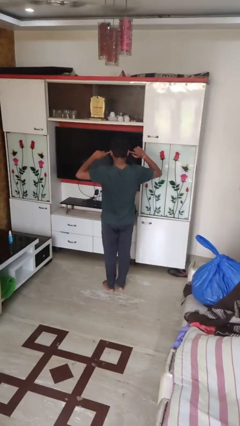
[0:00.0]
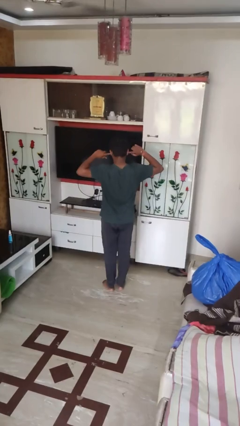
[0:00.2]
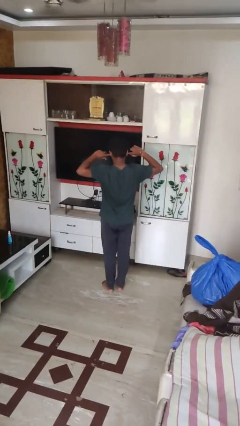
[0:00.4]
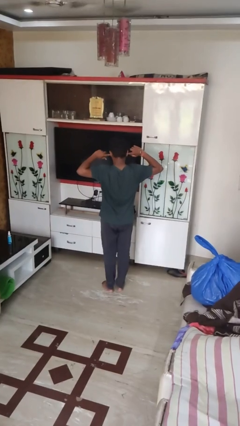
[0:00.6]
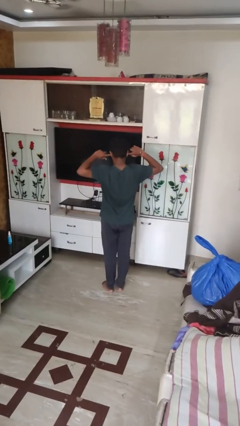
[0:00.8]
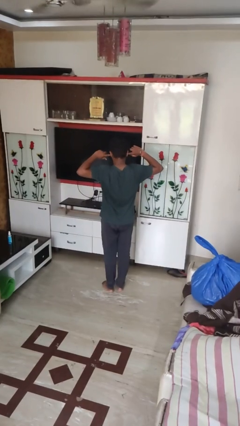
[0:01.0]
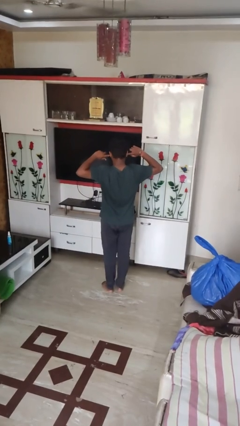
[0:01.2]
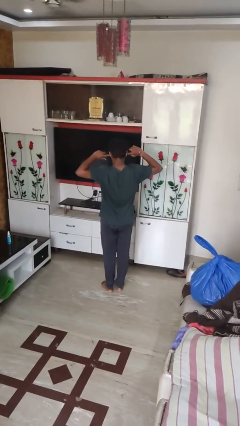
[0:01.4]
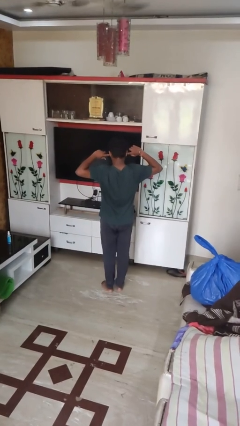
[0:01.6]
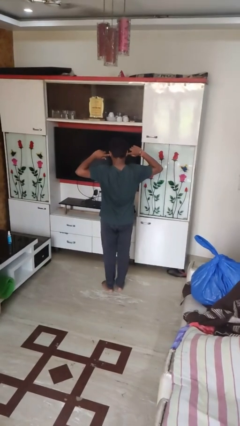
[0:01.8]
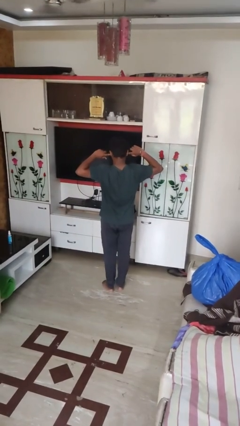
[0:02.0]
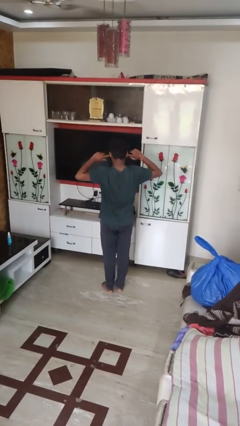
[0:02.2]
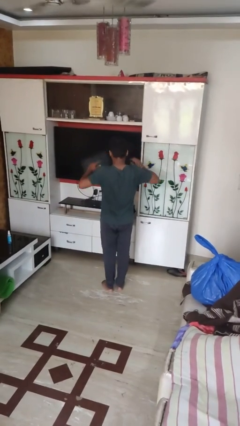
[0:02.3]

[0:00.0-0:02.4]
person puts fingers in ear

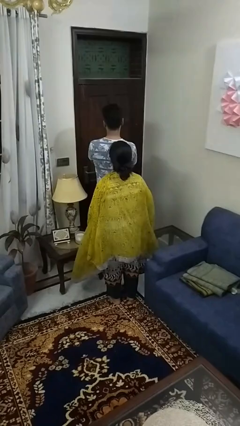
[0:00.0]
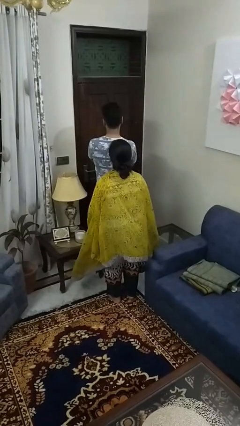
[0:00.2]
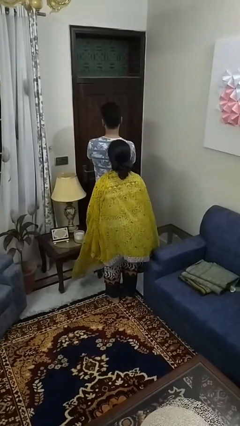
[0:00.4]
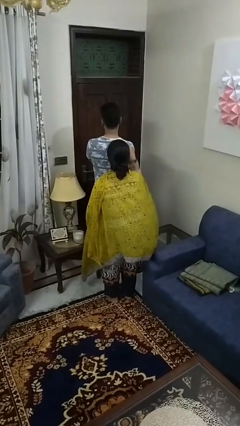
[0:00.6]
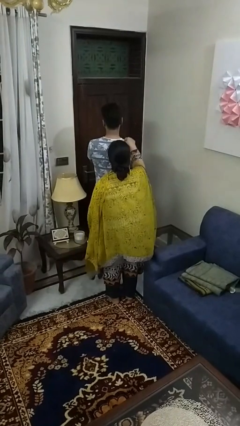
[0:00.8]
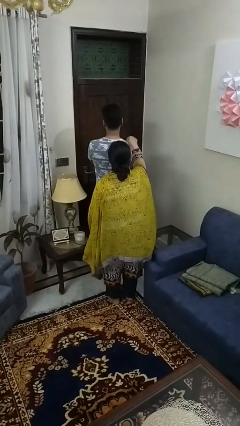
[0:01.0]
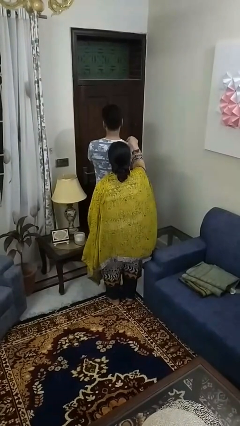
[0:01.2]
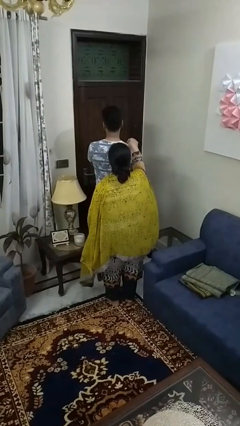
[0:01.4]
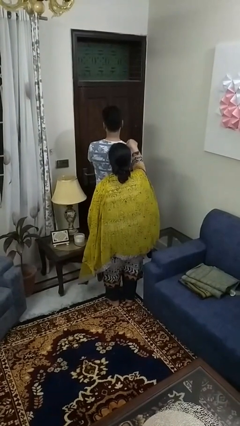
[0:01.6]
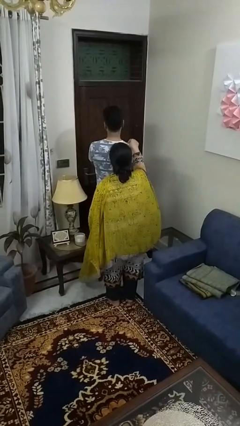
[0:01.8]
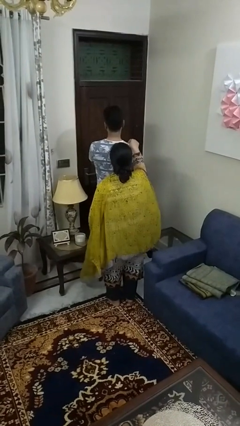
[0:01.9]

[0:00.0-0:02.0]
person touches back of person

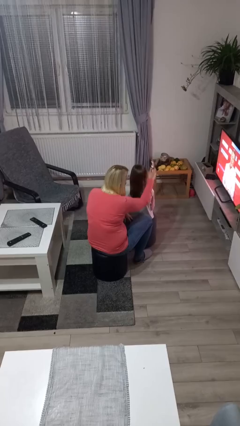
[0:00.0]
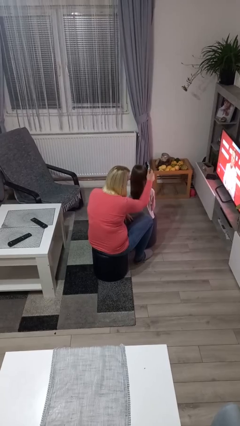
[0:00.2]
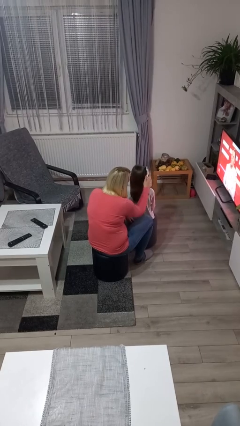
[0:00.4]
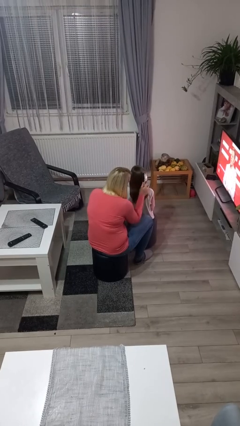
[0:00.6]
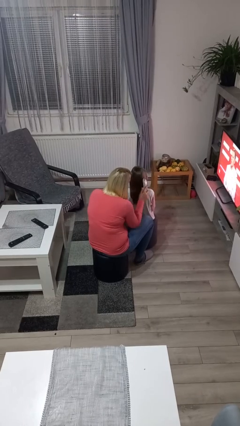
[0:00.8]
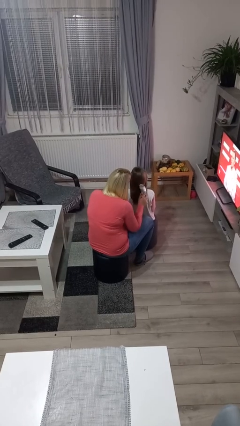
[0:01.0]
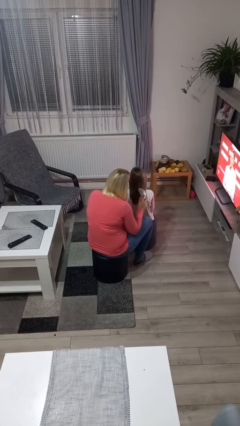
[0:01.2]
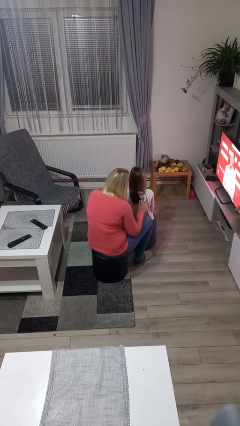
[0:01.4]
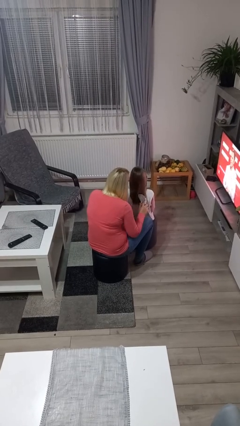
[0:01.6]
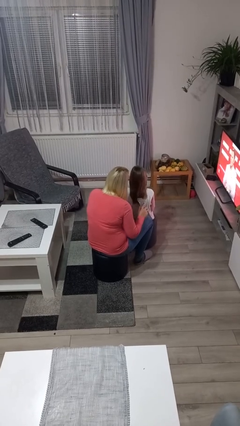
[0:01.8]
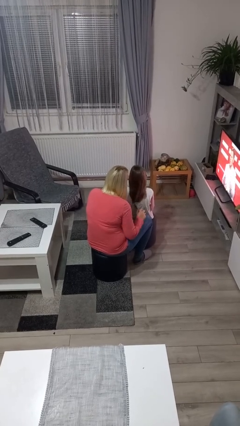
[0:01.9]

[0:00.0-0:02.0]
person brushes hair of person

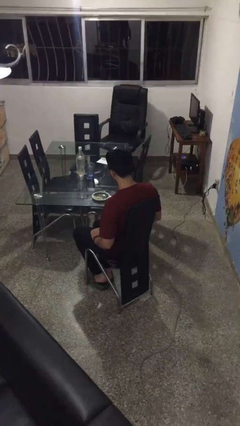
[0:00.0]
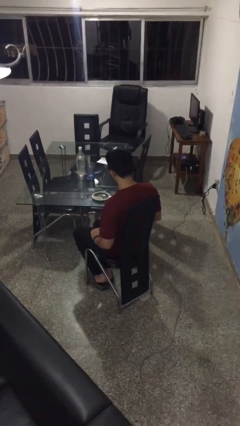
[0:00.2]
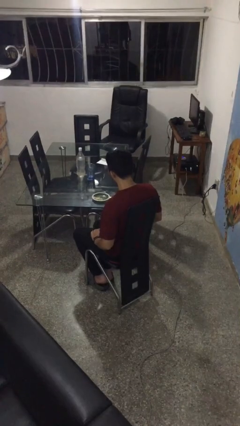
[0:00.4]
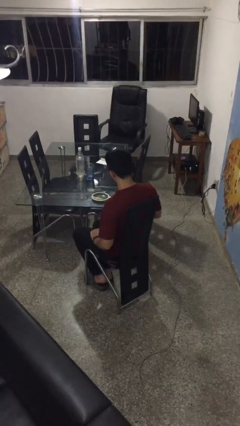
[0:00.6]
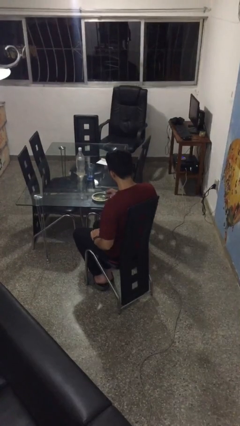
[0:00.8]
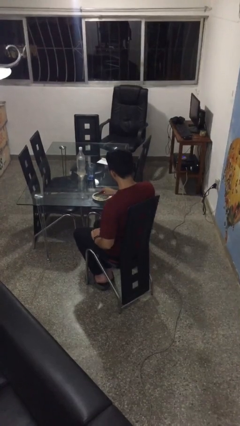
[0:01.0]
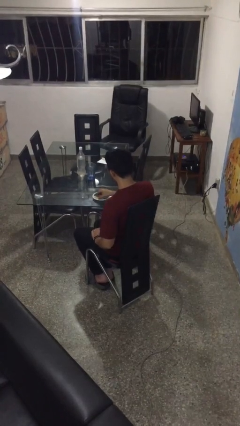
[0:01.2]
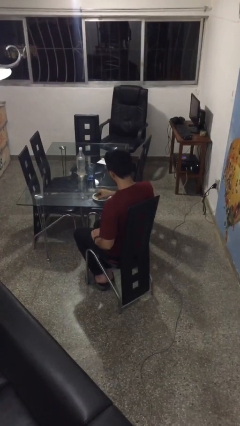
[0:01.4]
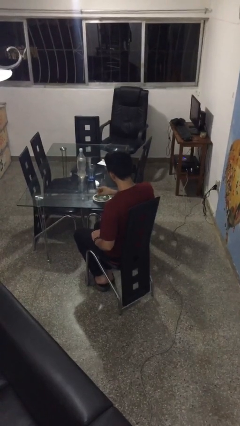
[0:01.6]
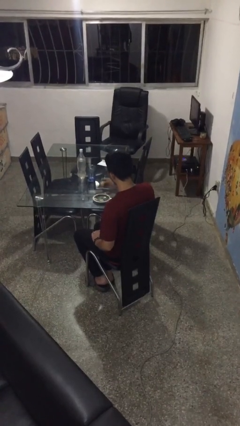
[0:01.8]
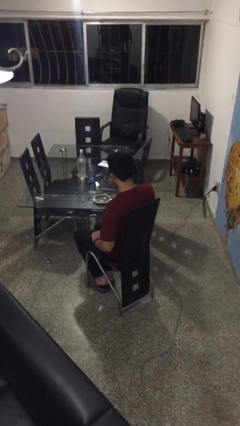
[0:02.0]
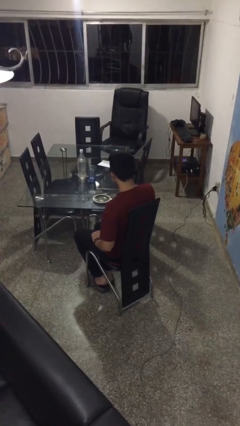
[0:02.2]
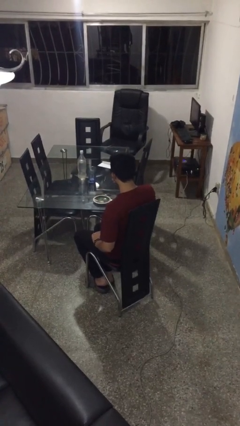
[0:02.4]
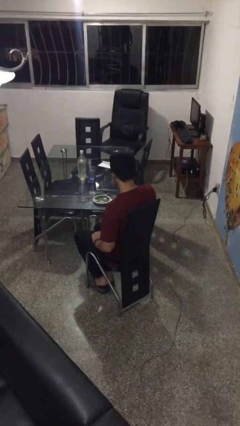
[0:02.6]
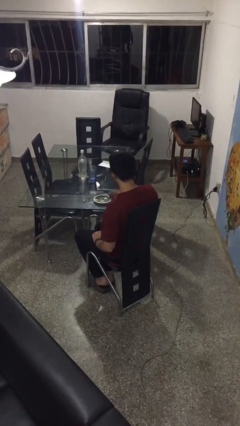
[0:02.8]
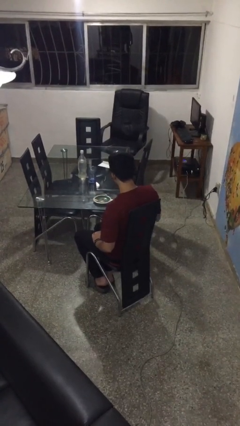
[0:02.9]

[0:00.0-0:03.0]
person eats with hands

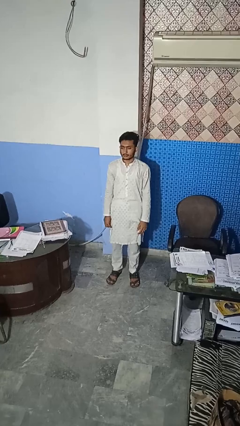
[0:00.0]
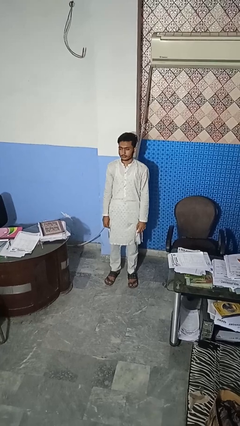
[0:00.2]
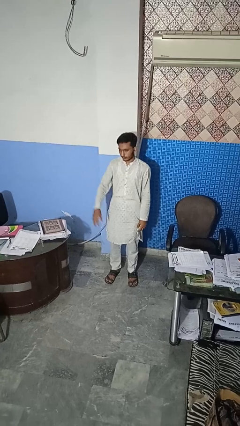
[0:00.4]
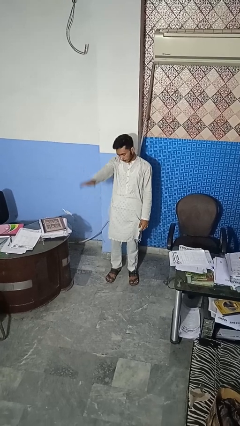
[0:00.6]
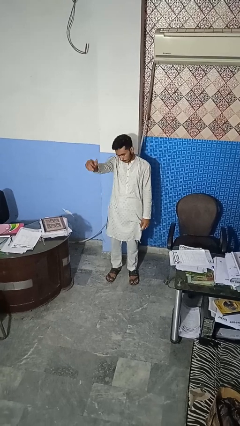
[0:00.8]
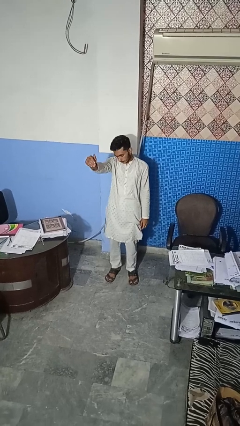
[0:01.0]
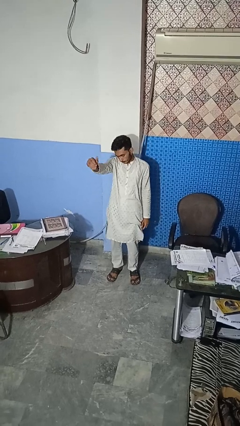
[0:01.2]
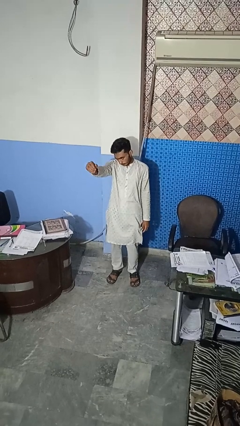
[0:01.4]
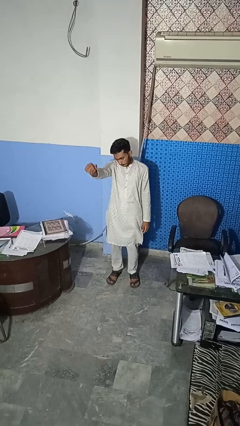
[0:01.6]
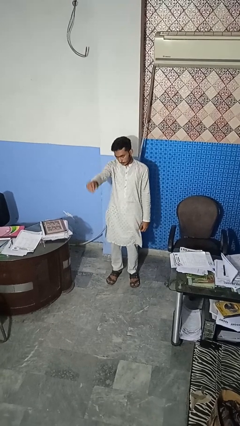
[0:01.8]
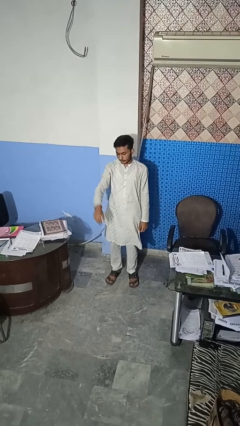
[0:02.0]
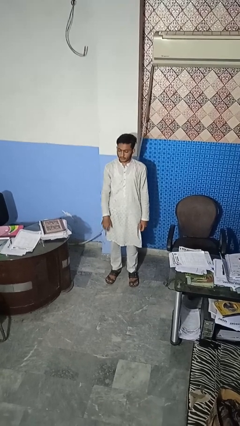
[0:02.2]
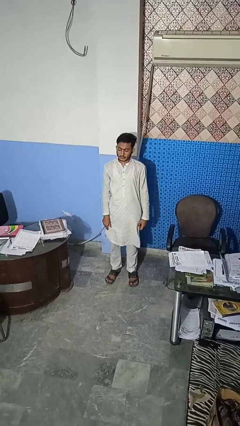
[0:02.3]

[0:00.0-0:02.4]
person gestures come here

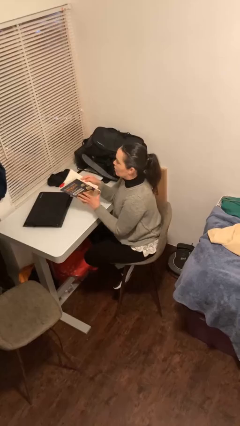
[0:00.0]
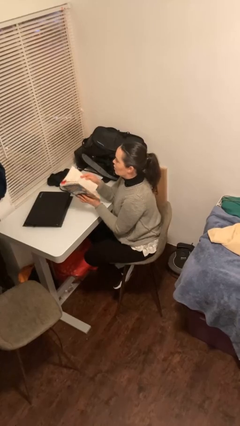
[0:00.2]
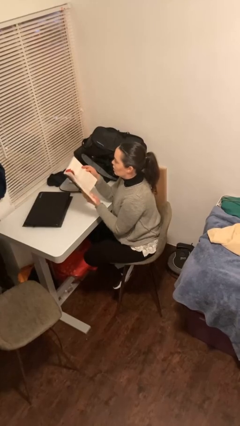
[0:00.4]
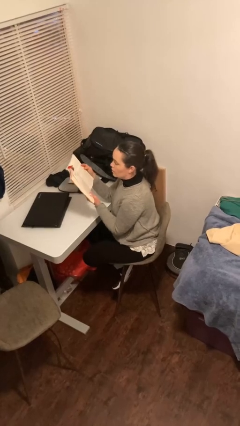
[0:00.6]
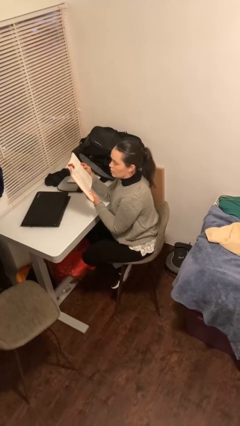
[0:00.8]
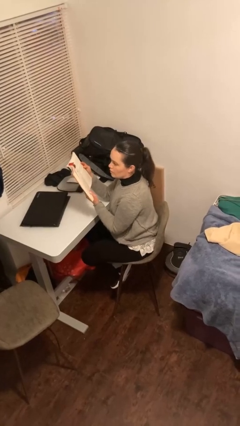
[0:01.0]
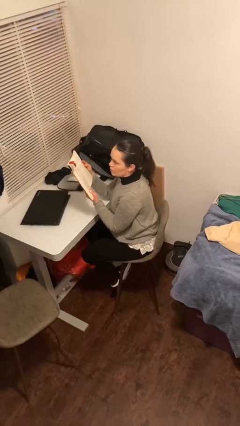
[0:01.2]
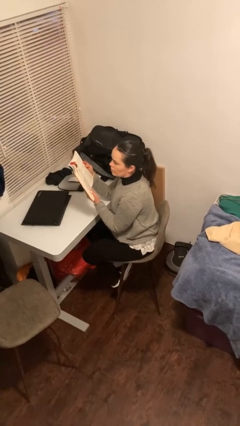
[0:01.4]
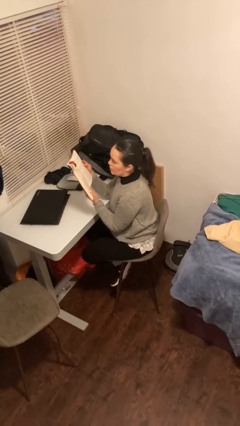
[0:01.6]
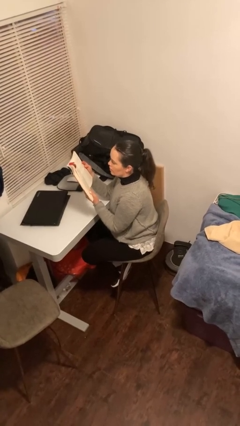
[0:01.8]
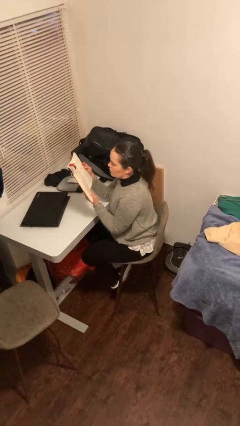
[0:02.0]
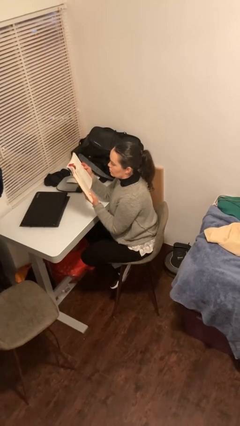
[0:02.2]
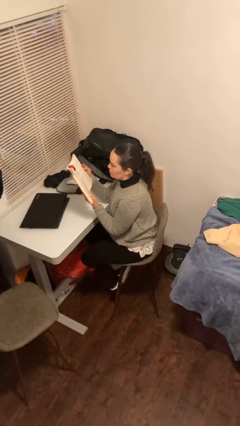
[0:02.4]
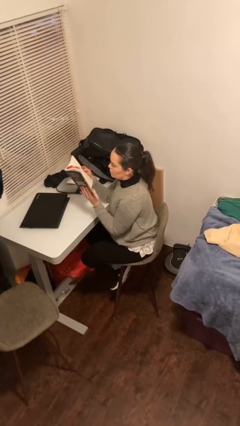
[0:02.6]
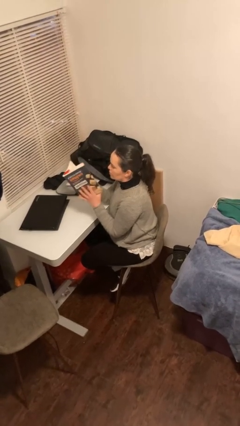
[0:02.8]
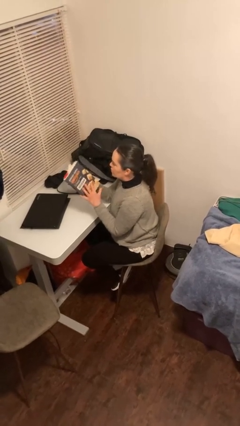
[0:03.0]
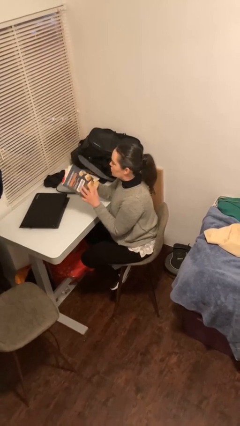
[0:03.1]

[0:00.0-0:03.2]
person reads document

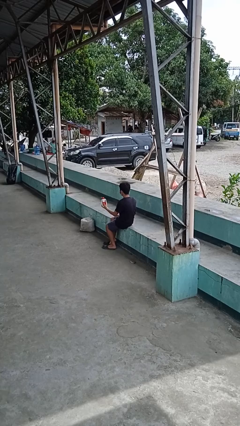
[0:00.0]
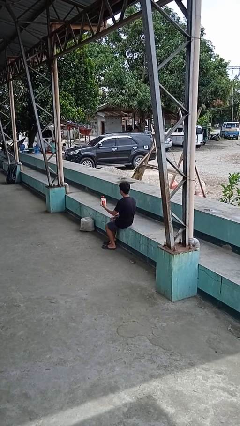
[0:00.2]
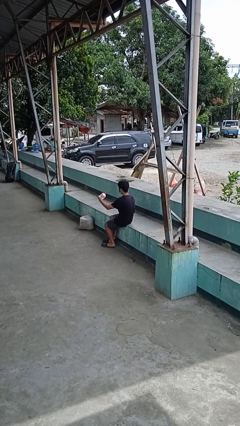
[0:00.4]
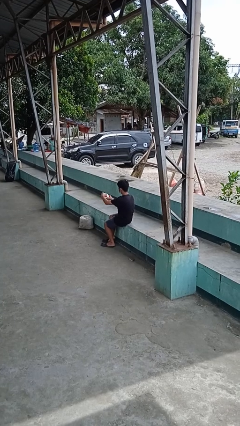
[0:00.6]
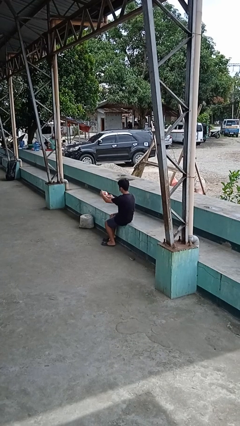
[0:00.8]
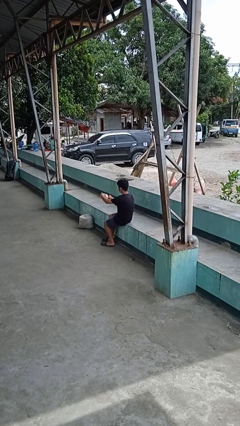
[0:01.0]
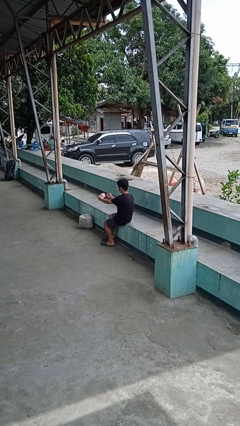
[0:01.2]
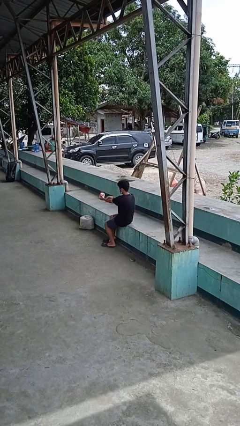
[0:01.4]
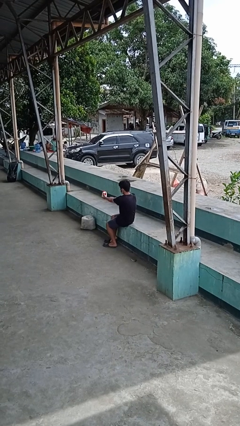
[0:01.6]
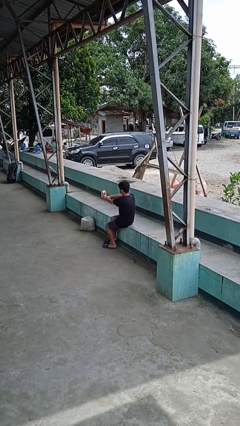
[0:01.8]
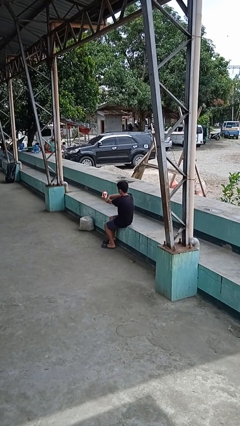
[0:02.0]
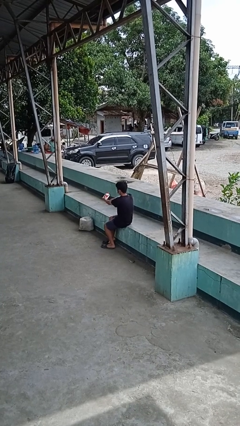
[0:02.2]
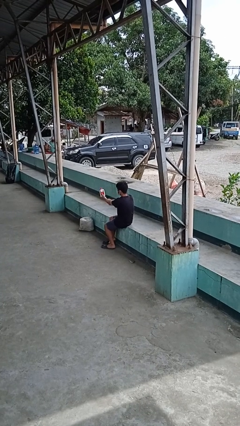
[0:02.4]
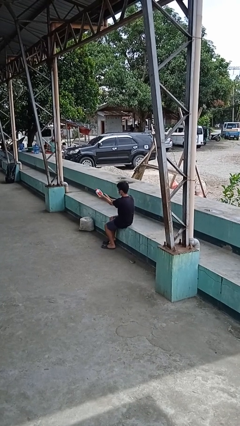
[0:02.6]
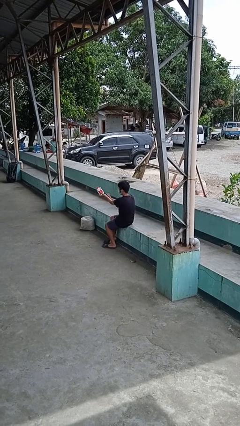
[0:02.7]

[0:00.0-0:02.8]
person applies sunscreen
